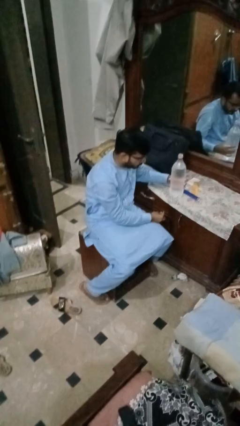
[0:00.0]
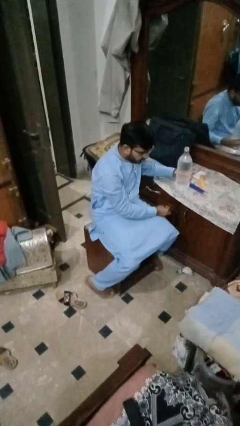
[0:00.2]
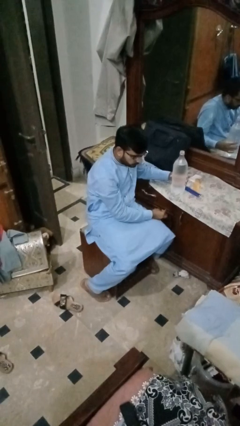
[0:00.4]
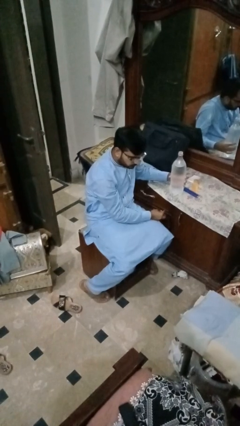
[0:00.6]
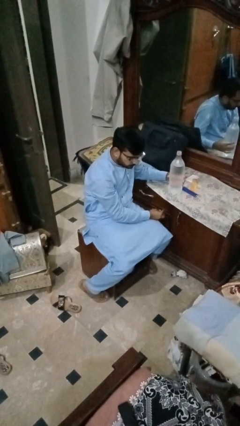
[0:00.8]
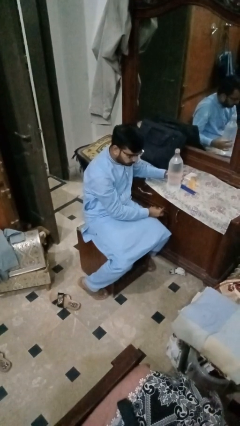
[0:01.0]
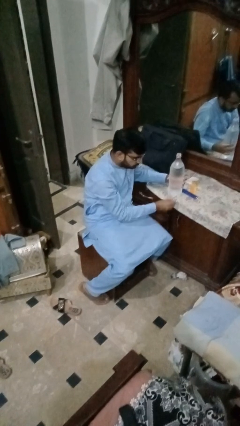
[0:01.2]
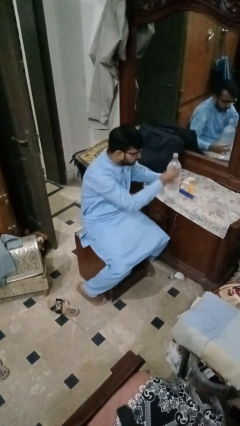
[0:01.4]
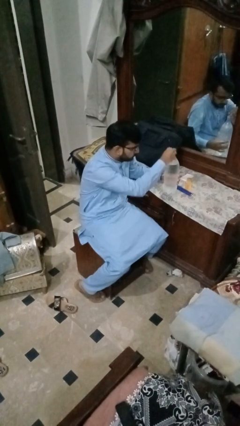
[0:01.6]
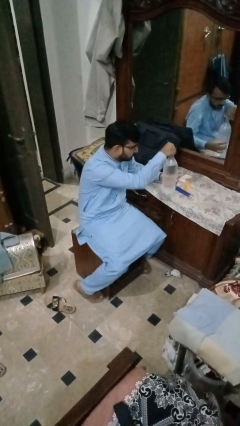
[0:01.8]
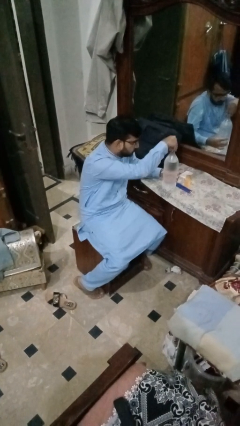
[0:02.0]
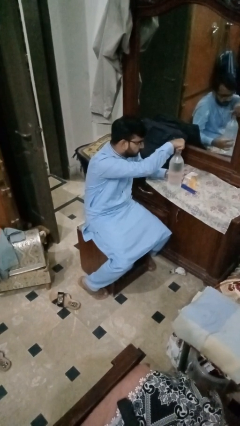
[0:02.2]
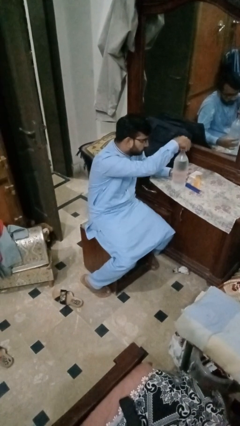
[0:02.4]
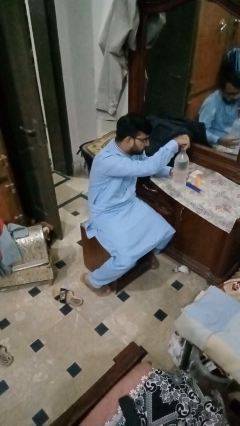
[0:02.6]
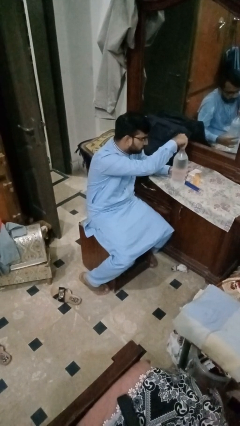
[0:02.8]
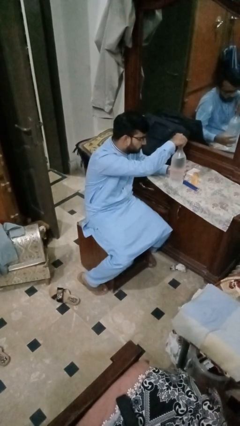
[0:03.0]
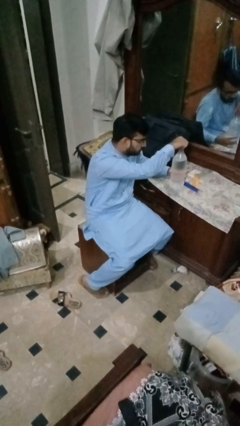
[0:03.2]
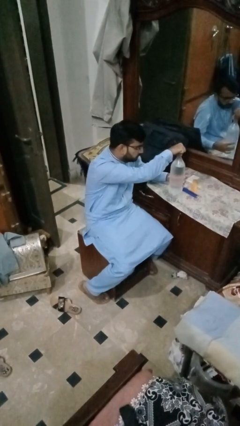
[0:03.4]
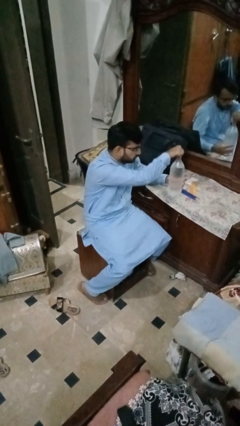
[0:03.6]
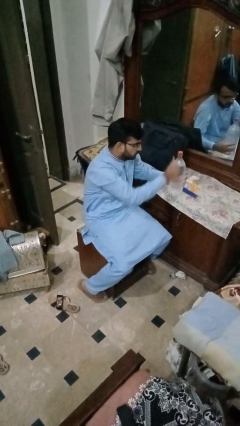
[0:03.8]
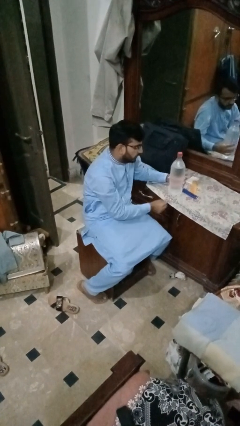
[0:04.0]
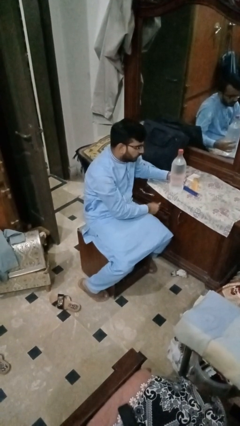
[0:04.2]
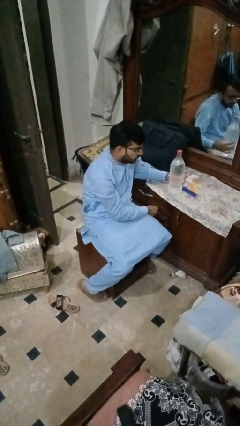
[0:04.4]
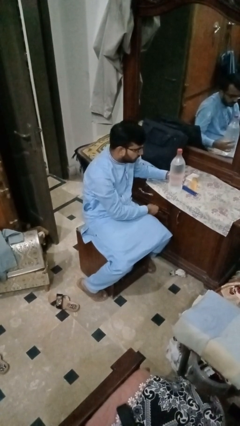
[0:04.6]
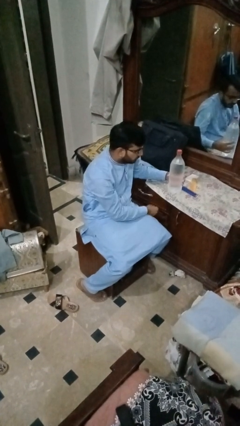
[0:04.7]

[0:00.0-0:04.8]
person screws lid to bottle

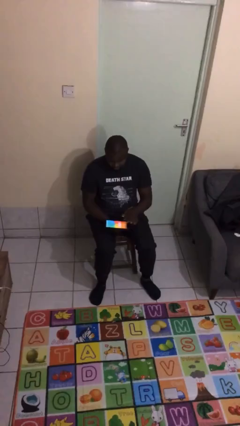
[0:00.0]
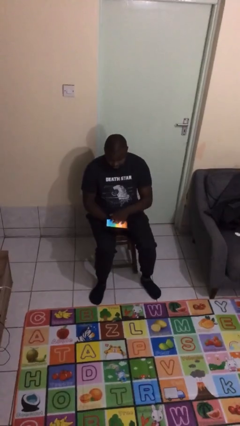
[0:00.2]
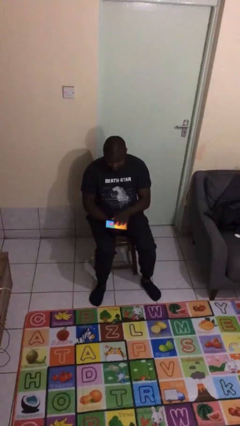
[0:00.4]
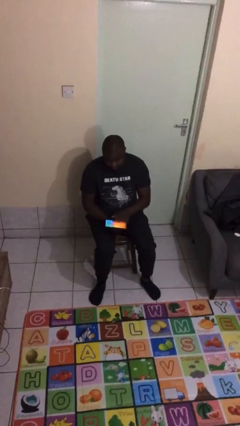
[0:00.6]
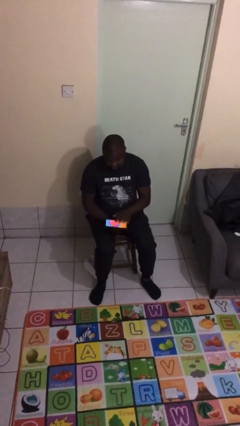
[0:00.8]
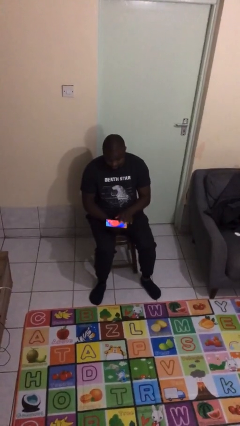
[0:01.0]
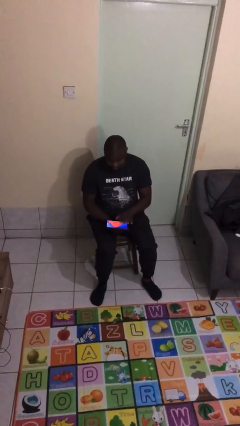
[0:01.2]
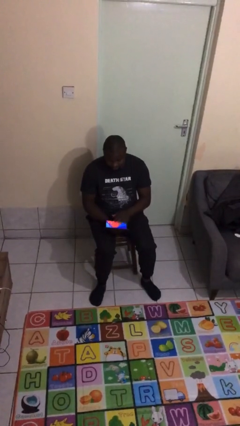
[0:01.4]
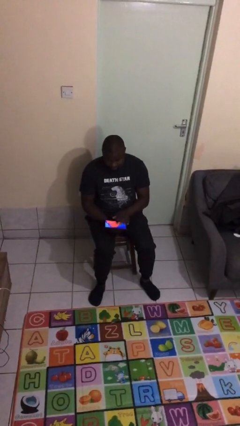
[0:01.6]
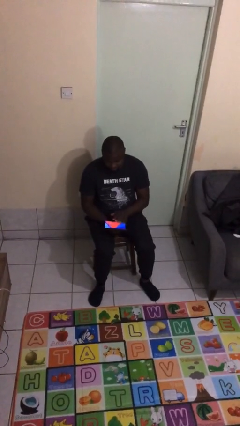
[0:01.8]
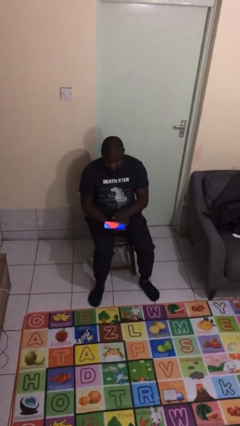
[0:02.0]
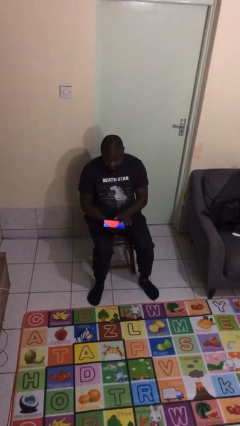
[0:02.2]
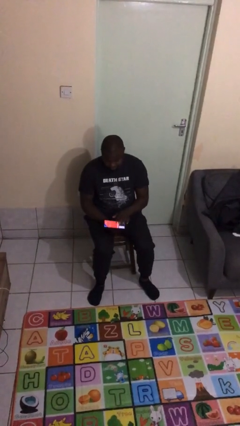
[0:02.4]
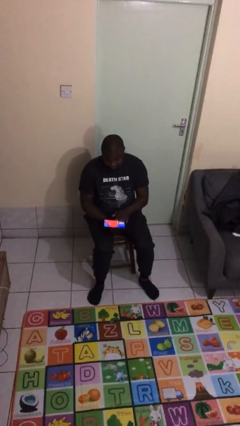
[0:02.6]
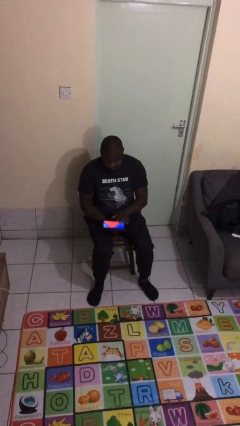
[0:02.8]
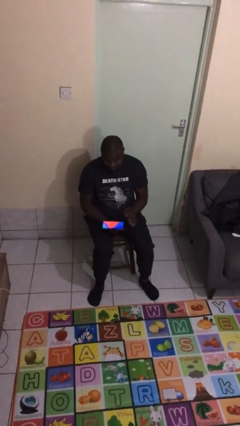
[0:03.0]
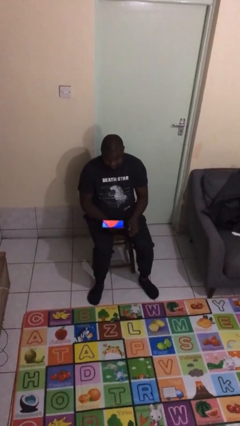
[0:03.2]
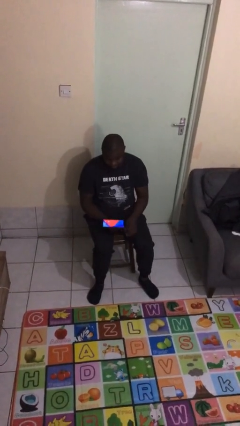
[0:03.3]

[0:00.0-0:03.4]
person interacts with tablet

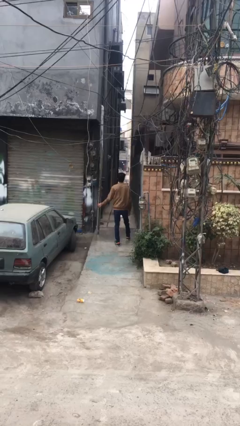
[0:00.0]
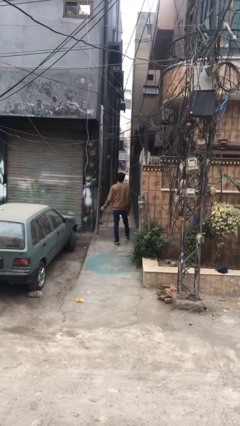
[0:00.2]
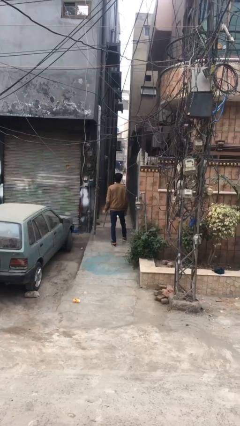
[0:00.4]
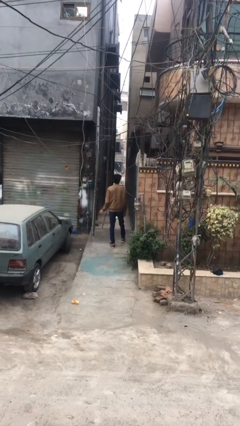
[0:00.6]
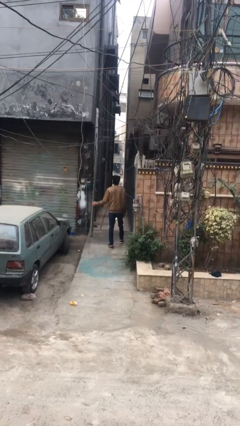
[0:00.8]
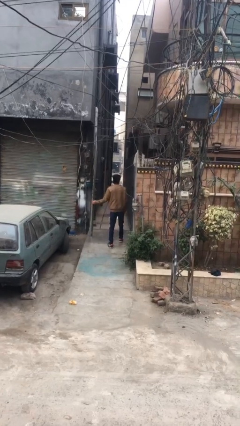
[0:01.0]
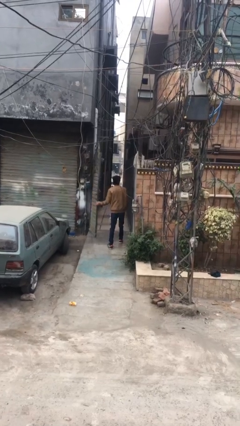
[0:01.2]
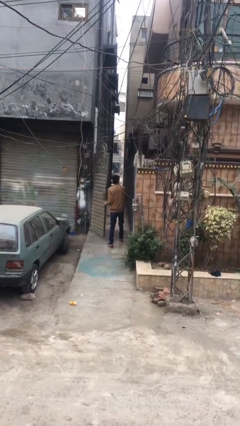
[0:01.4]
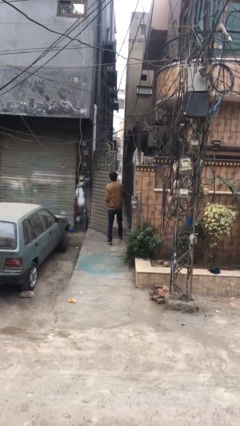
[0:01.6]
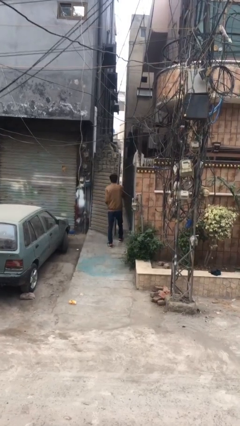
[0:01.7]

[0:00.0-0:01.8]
person closes facility door

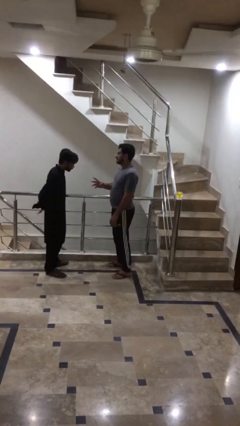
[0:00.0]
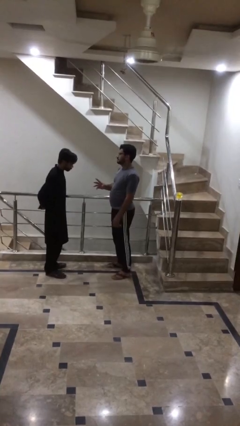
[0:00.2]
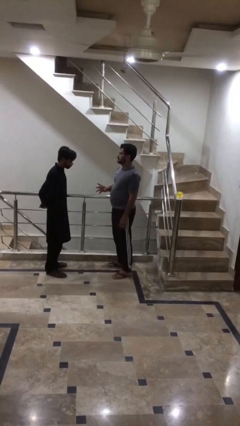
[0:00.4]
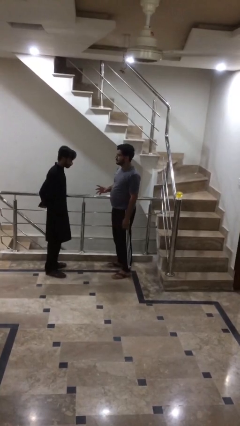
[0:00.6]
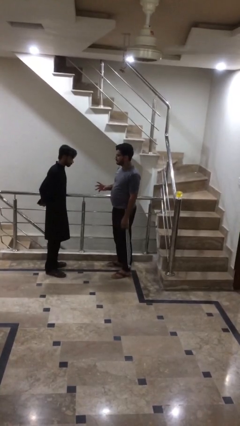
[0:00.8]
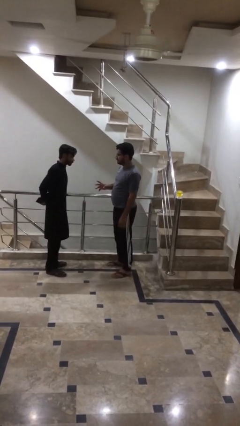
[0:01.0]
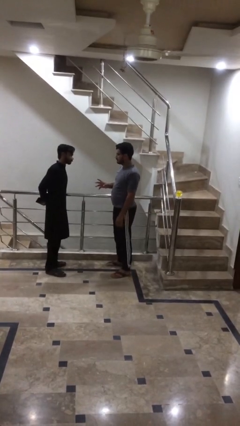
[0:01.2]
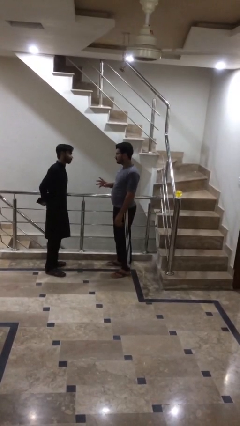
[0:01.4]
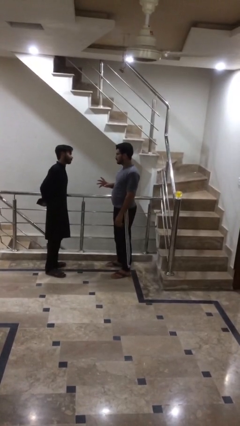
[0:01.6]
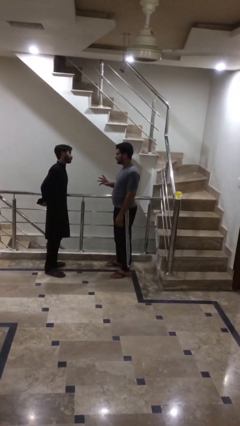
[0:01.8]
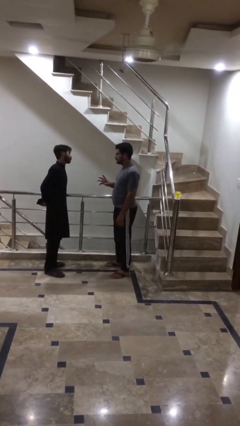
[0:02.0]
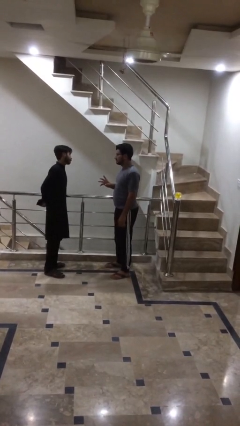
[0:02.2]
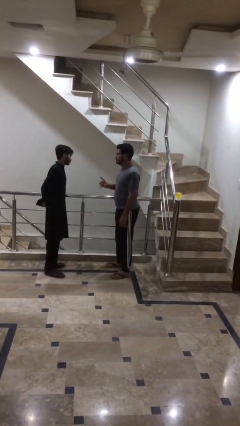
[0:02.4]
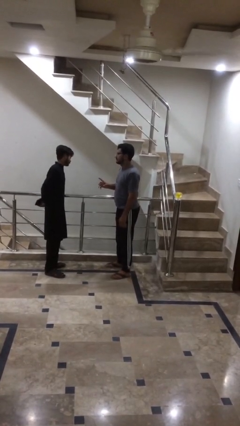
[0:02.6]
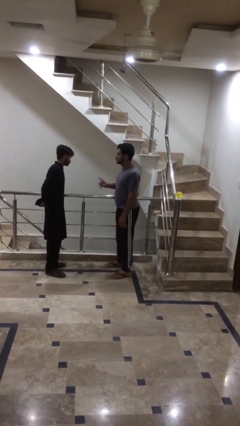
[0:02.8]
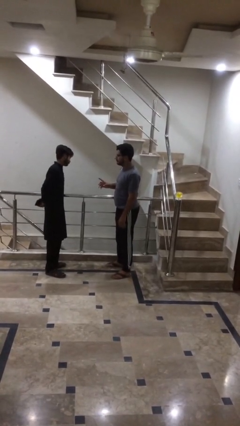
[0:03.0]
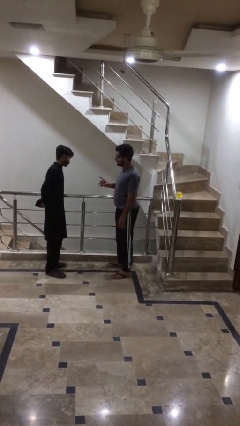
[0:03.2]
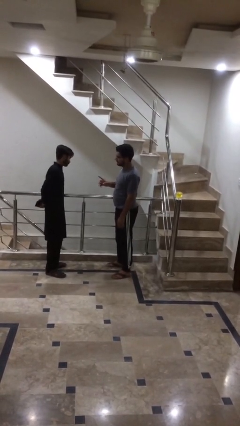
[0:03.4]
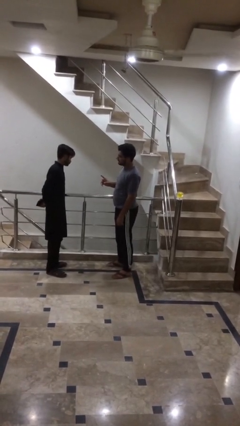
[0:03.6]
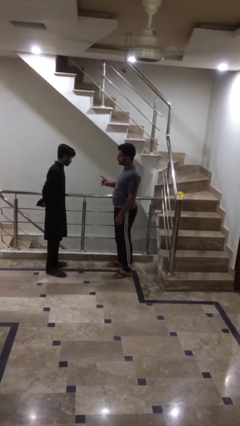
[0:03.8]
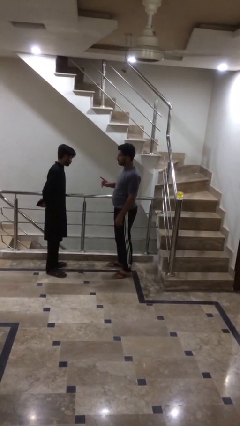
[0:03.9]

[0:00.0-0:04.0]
person talks to person

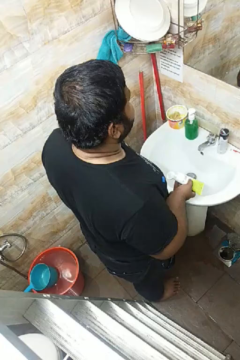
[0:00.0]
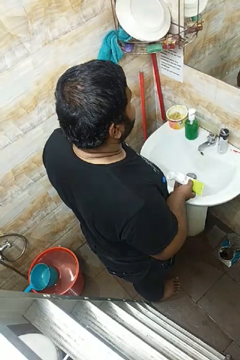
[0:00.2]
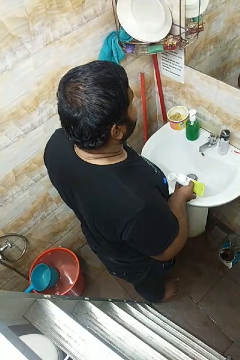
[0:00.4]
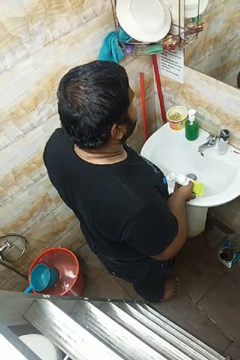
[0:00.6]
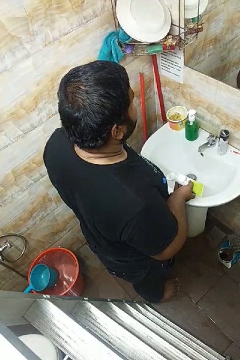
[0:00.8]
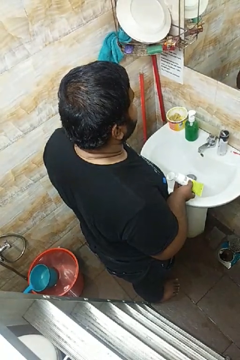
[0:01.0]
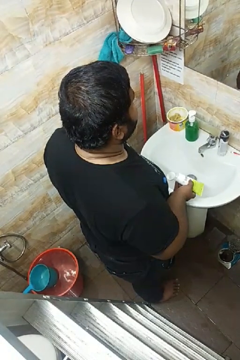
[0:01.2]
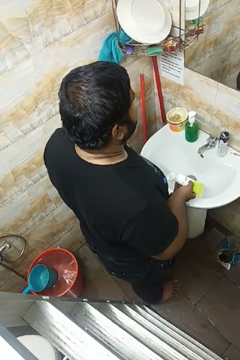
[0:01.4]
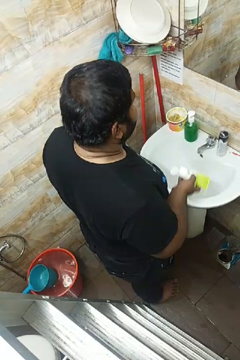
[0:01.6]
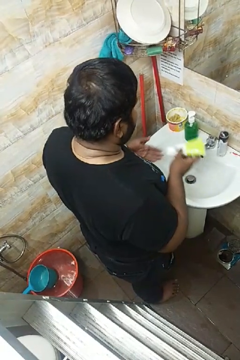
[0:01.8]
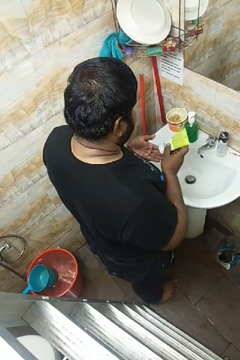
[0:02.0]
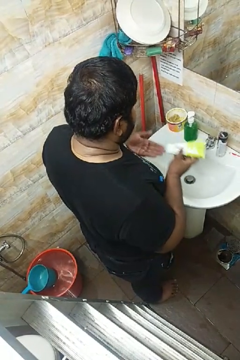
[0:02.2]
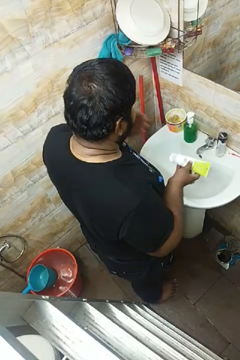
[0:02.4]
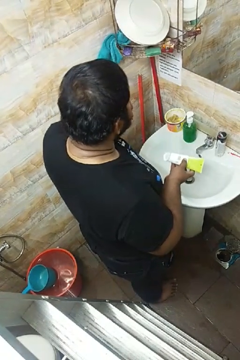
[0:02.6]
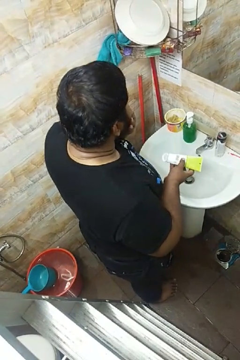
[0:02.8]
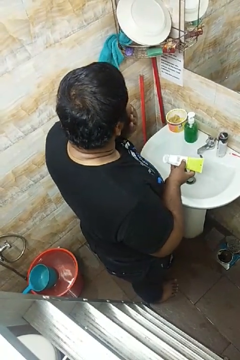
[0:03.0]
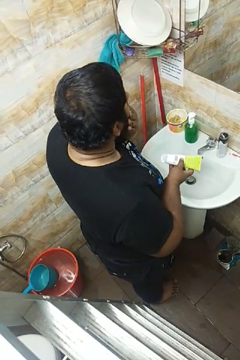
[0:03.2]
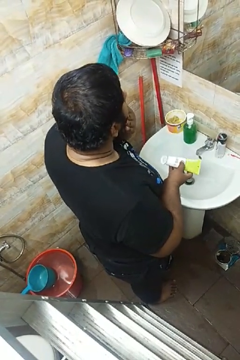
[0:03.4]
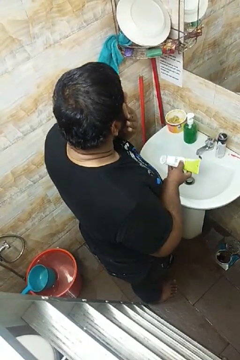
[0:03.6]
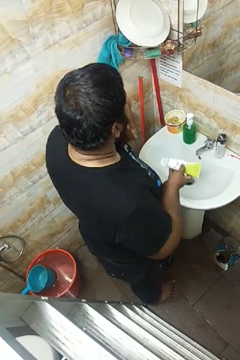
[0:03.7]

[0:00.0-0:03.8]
person applies facial moisturizer
